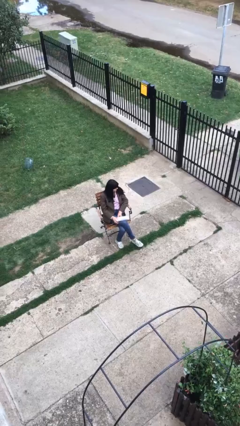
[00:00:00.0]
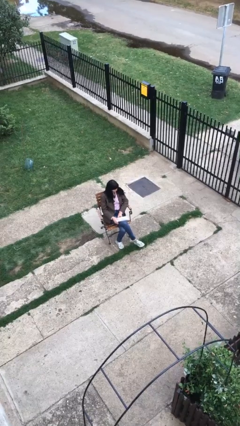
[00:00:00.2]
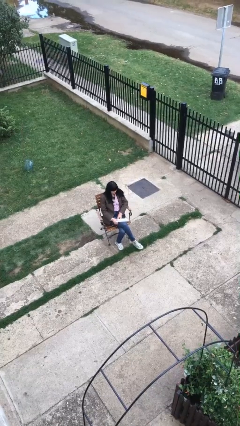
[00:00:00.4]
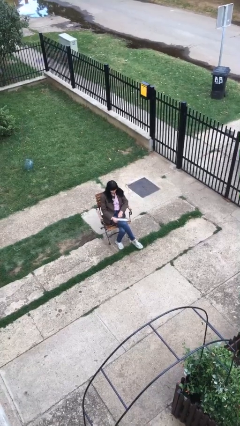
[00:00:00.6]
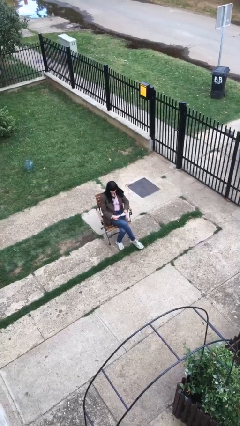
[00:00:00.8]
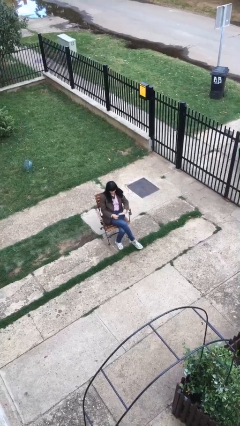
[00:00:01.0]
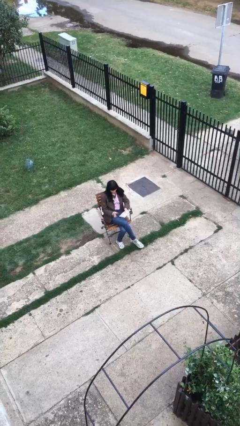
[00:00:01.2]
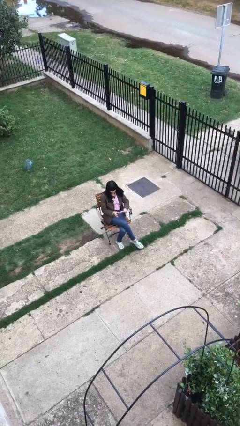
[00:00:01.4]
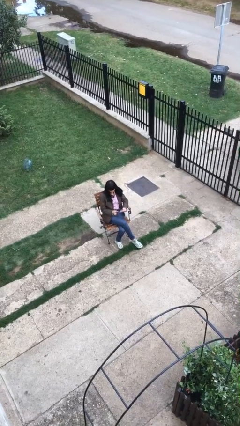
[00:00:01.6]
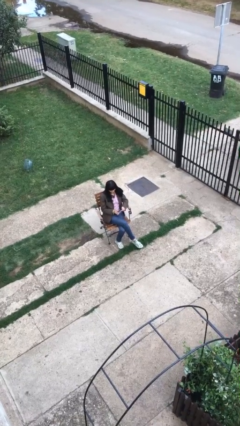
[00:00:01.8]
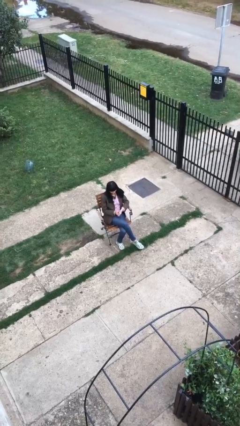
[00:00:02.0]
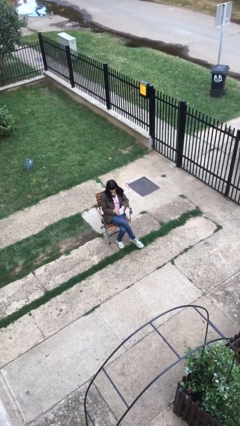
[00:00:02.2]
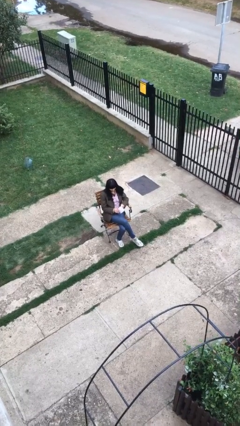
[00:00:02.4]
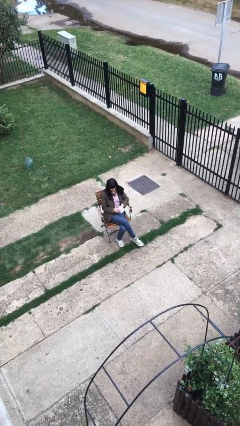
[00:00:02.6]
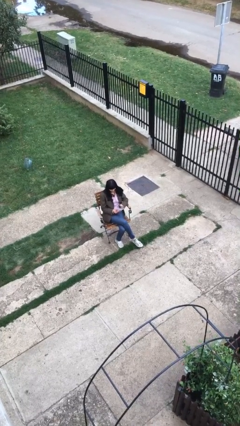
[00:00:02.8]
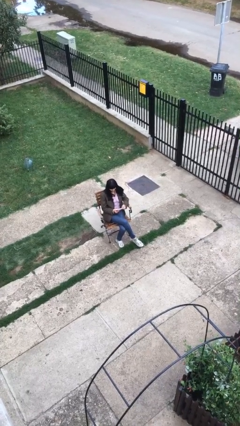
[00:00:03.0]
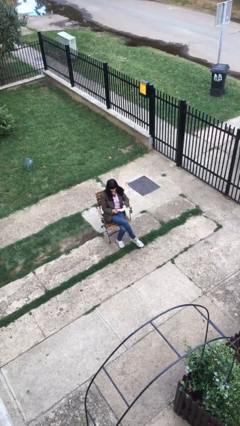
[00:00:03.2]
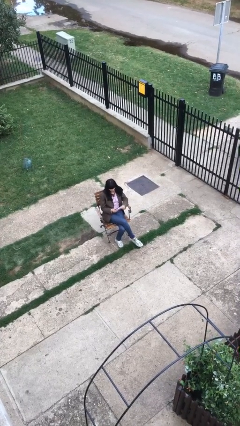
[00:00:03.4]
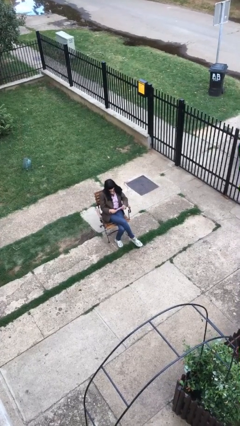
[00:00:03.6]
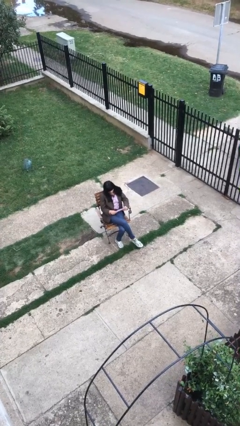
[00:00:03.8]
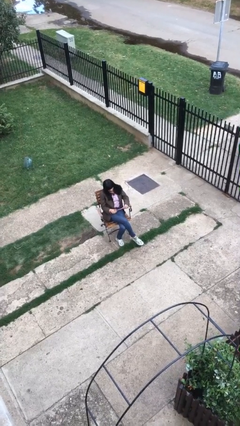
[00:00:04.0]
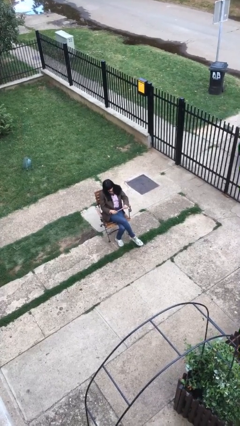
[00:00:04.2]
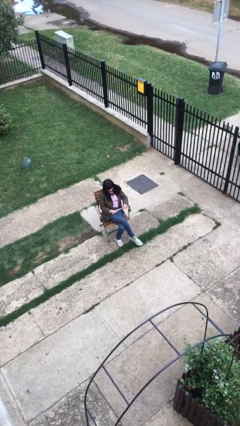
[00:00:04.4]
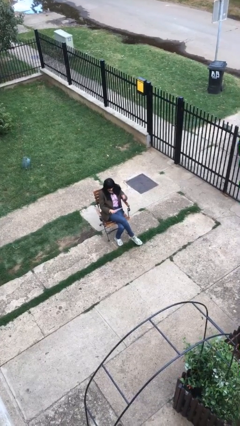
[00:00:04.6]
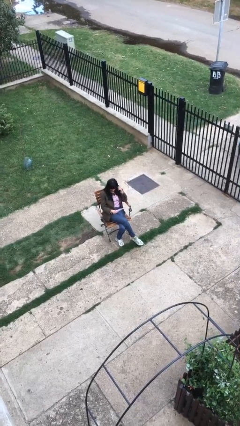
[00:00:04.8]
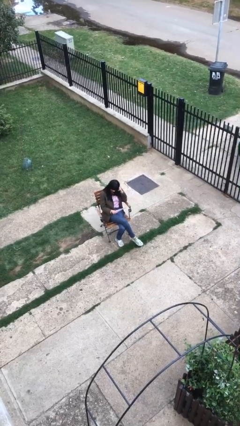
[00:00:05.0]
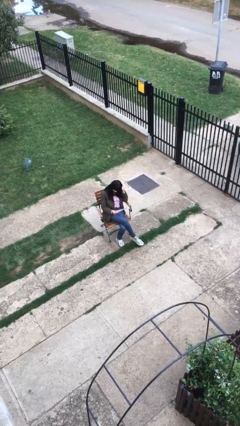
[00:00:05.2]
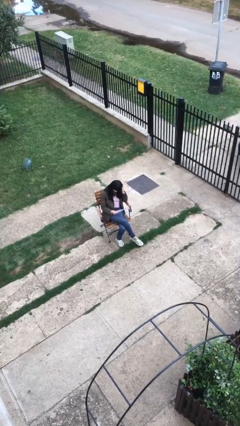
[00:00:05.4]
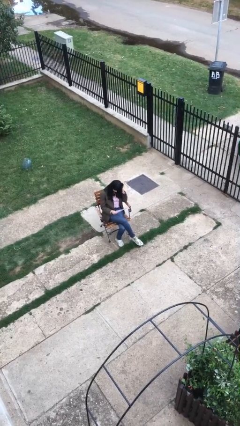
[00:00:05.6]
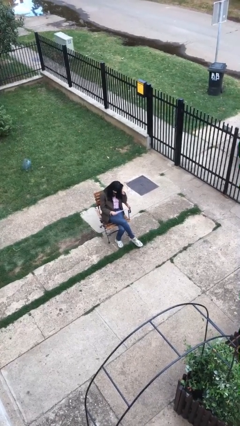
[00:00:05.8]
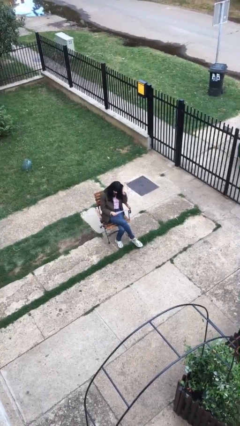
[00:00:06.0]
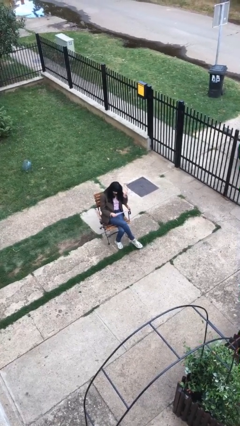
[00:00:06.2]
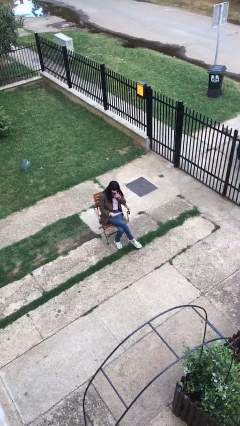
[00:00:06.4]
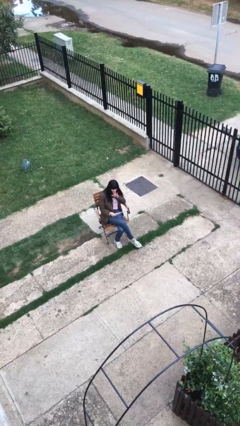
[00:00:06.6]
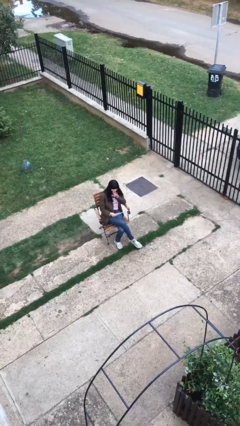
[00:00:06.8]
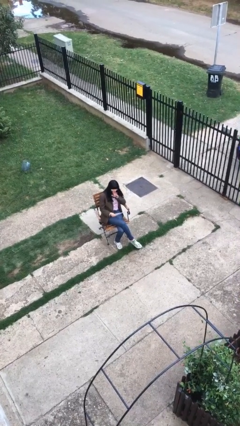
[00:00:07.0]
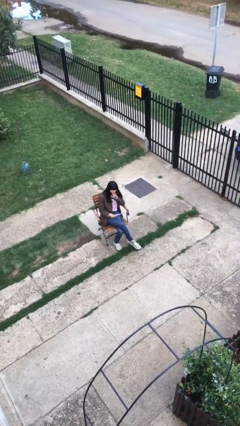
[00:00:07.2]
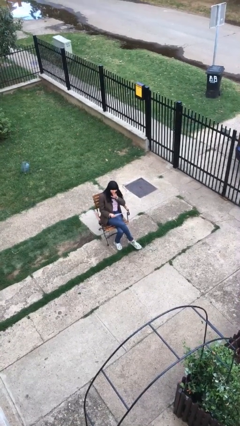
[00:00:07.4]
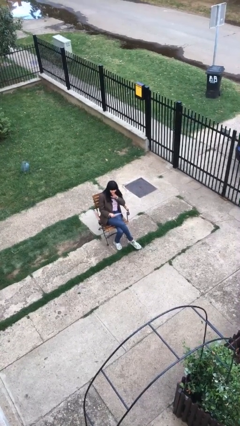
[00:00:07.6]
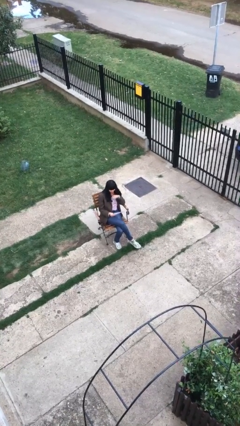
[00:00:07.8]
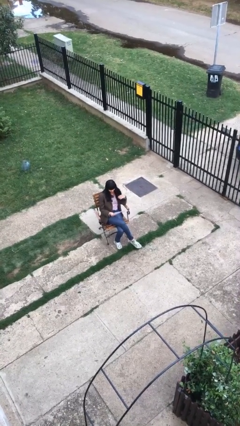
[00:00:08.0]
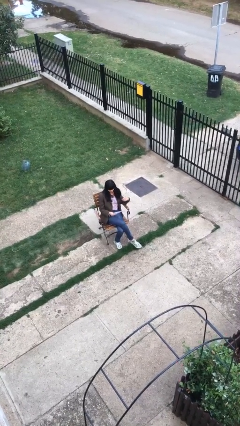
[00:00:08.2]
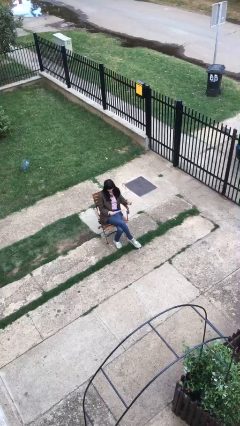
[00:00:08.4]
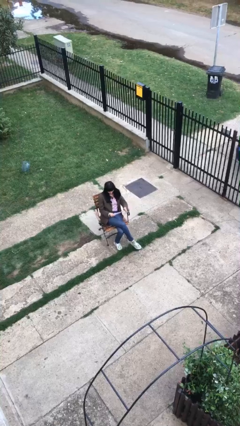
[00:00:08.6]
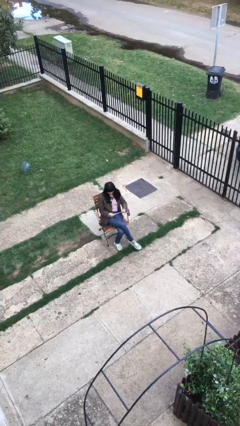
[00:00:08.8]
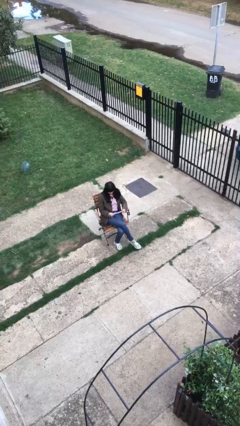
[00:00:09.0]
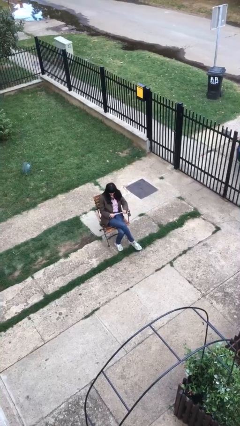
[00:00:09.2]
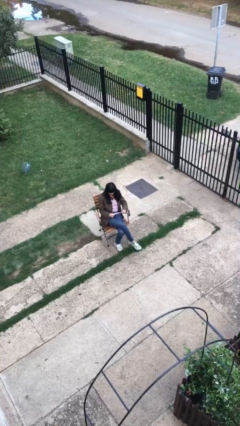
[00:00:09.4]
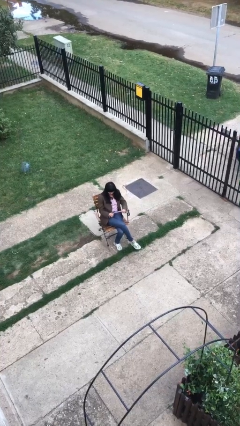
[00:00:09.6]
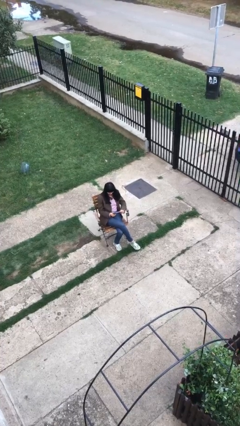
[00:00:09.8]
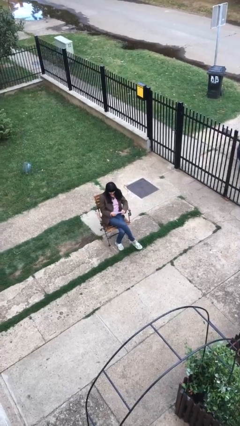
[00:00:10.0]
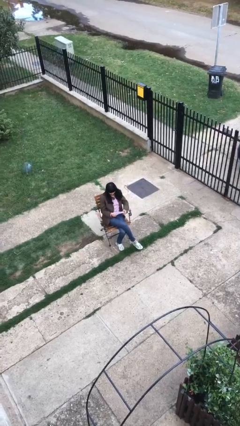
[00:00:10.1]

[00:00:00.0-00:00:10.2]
person reads document

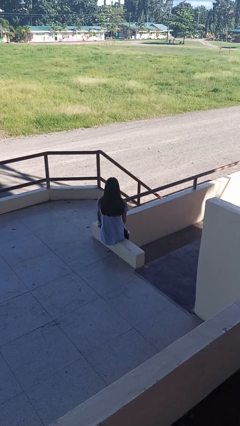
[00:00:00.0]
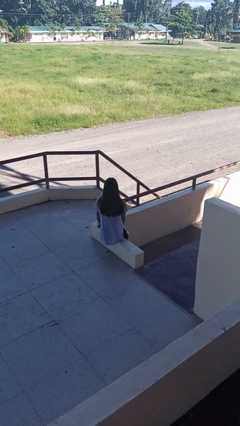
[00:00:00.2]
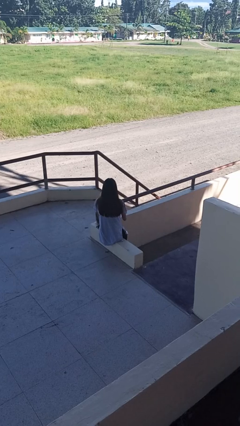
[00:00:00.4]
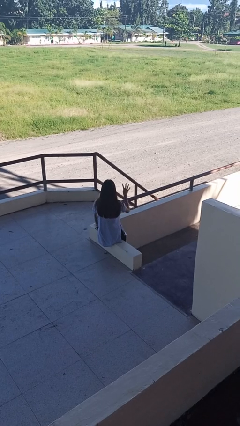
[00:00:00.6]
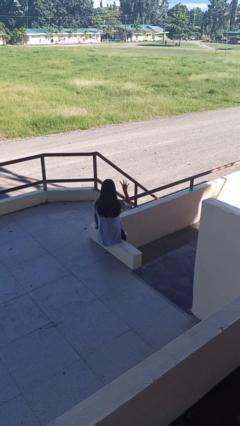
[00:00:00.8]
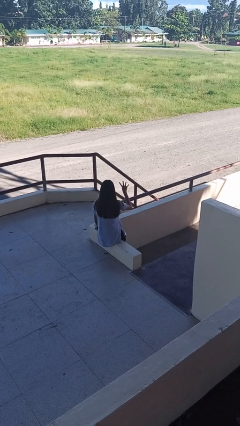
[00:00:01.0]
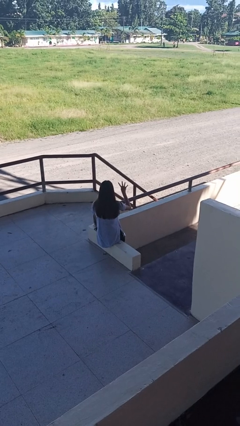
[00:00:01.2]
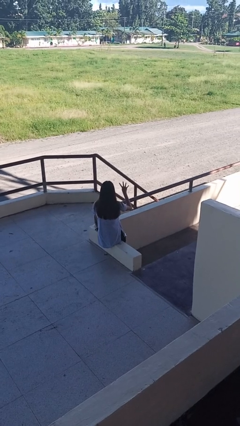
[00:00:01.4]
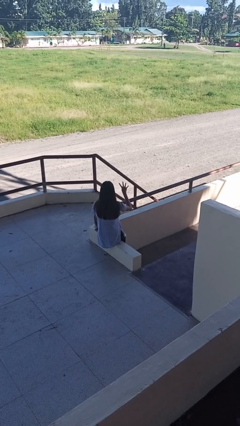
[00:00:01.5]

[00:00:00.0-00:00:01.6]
person gestures number four

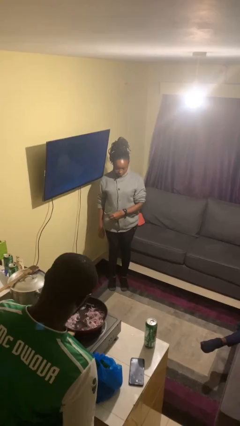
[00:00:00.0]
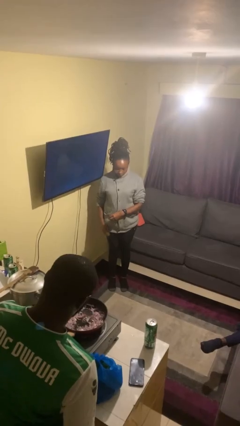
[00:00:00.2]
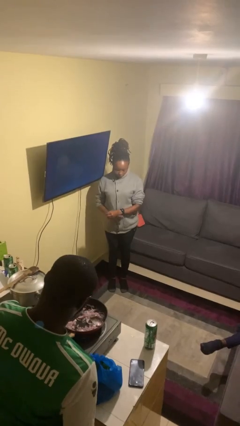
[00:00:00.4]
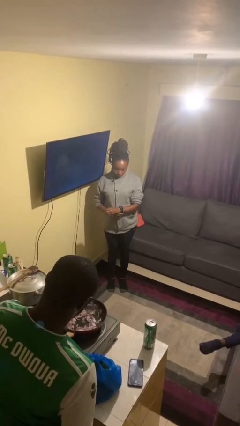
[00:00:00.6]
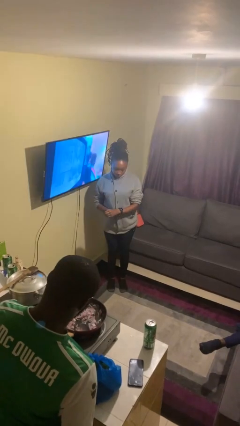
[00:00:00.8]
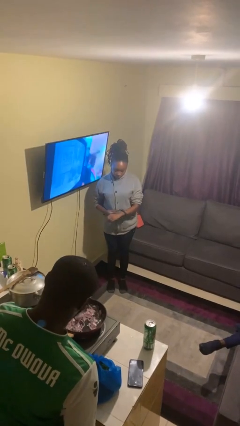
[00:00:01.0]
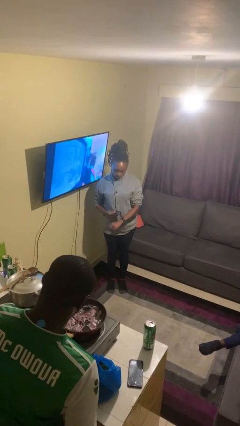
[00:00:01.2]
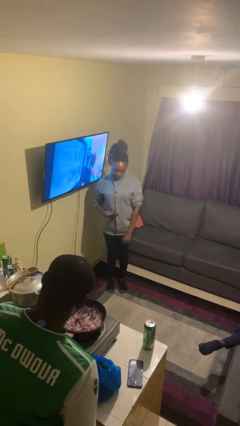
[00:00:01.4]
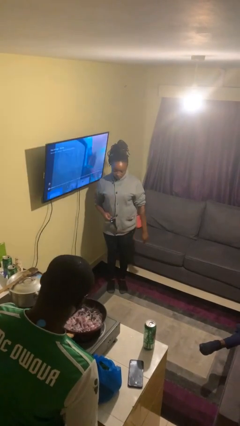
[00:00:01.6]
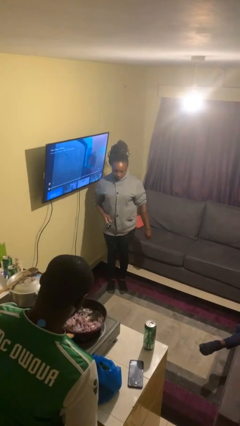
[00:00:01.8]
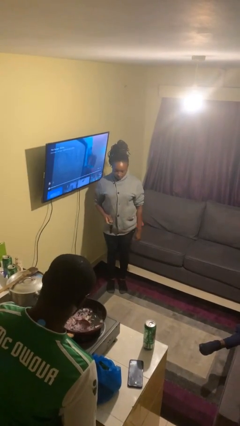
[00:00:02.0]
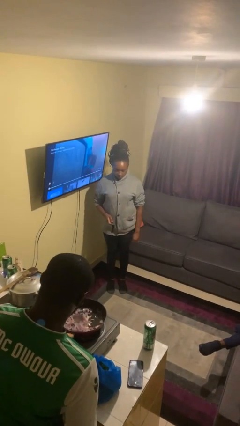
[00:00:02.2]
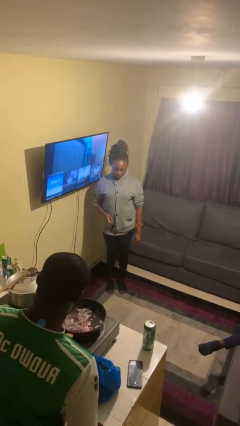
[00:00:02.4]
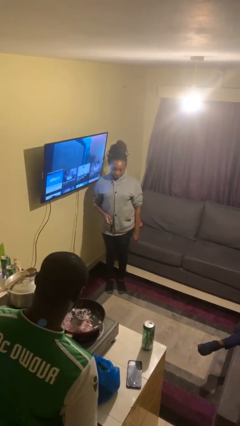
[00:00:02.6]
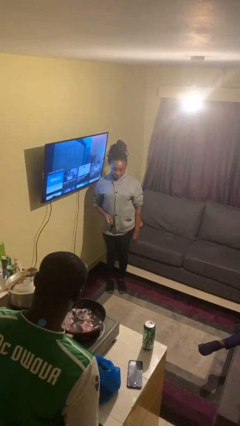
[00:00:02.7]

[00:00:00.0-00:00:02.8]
person takes off wristwatch

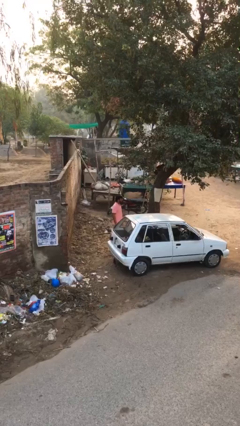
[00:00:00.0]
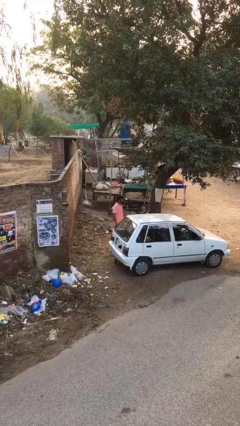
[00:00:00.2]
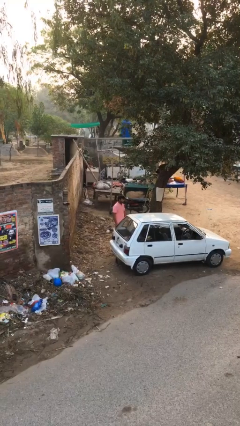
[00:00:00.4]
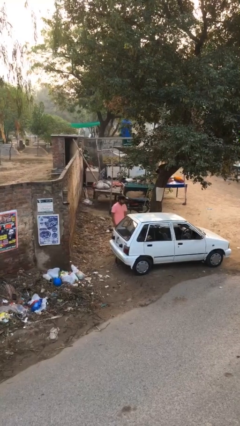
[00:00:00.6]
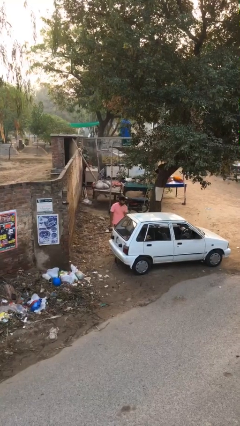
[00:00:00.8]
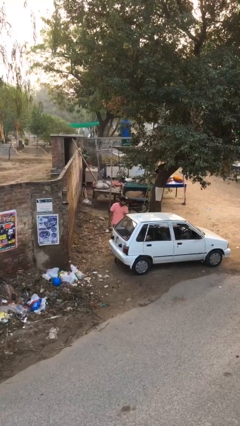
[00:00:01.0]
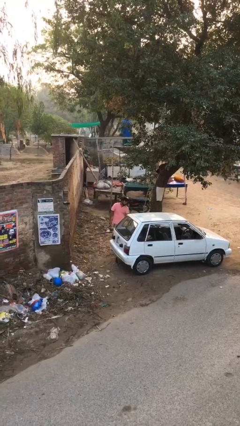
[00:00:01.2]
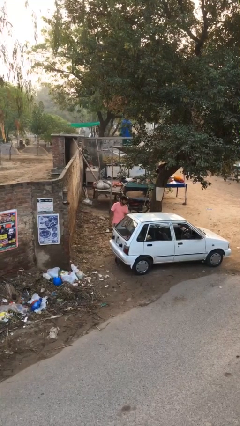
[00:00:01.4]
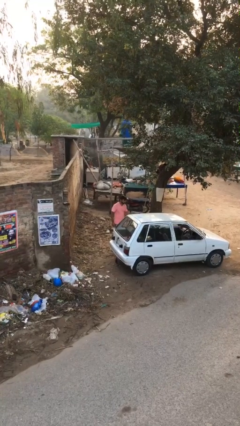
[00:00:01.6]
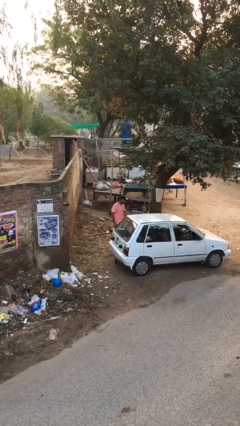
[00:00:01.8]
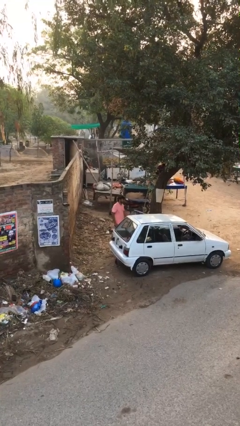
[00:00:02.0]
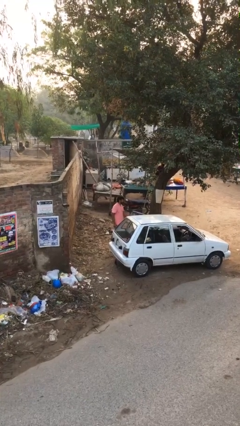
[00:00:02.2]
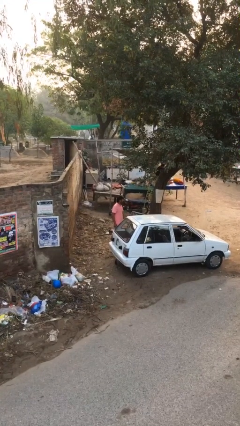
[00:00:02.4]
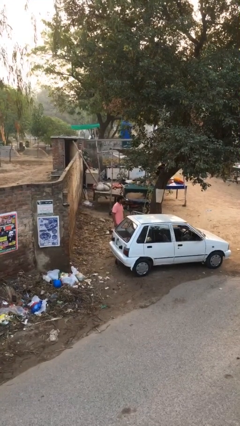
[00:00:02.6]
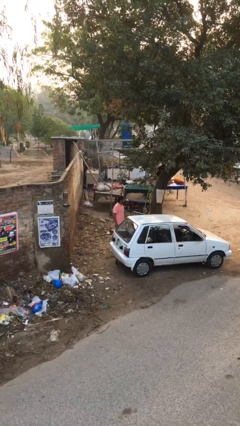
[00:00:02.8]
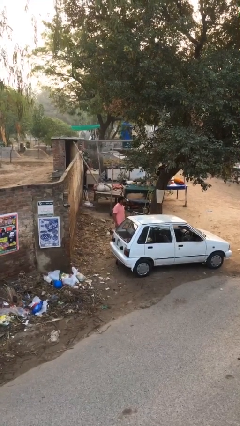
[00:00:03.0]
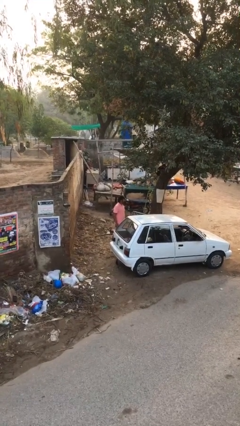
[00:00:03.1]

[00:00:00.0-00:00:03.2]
person opens car door

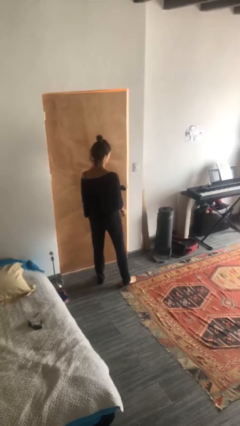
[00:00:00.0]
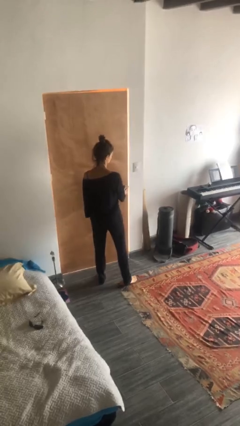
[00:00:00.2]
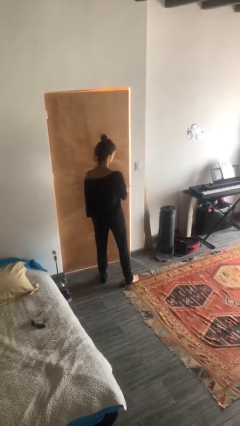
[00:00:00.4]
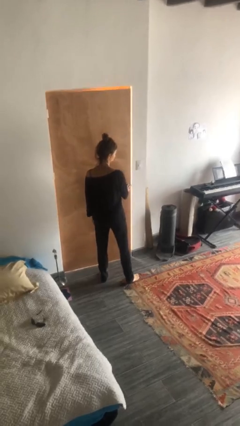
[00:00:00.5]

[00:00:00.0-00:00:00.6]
person unlocks door with keys
